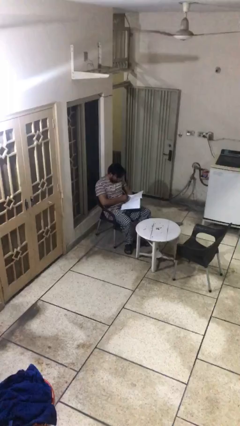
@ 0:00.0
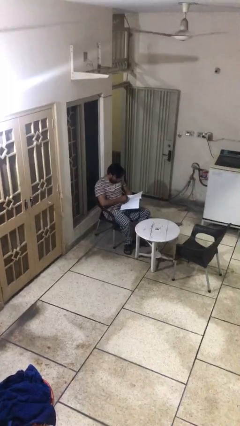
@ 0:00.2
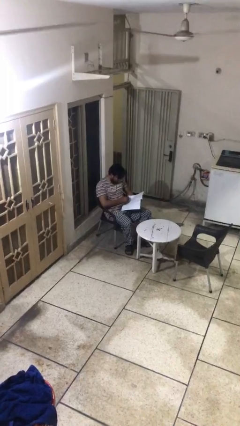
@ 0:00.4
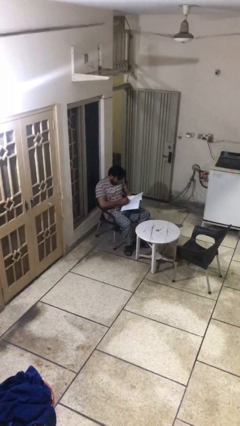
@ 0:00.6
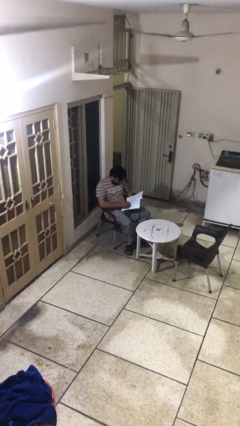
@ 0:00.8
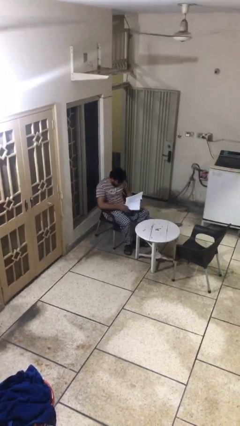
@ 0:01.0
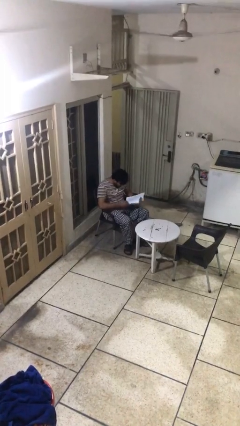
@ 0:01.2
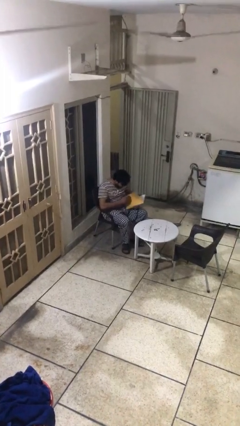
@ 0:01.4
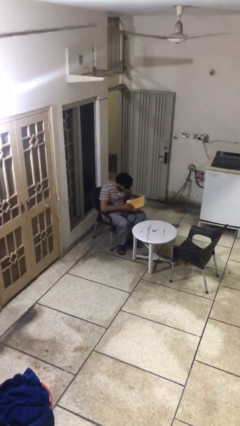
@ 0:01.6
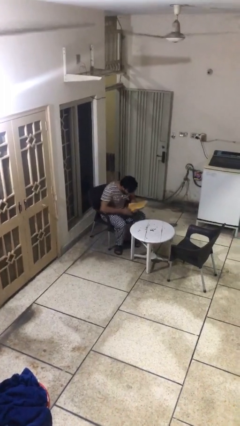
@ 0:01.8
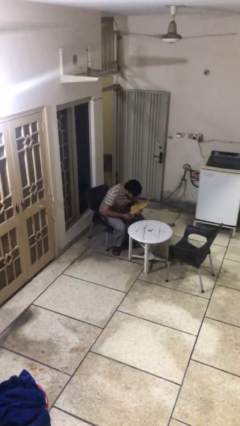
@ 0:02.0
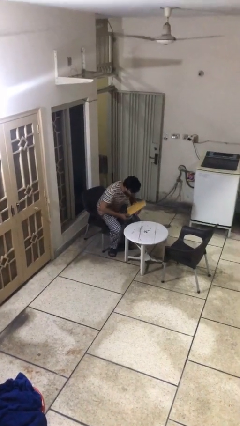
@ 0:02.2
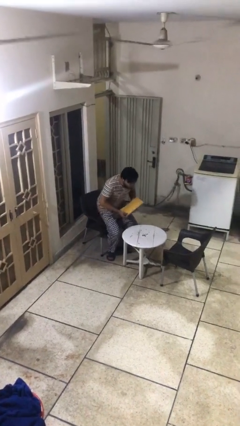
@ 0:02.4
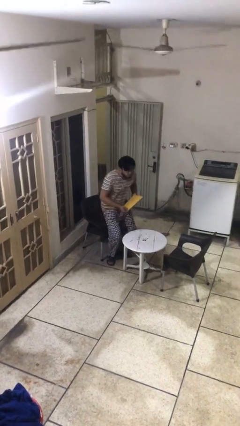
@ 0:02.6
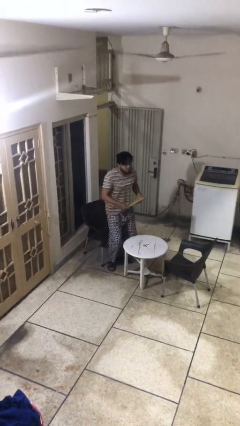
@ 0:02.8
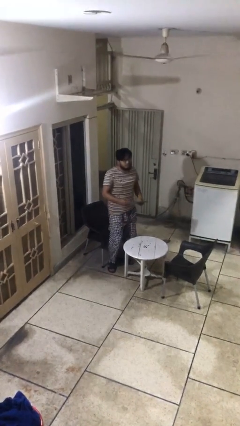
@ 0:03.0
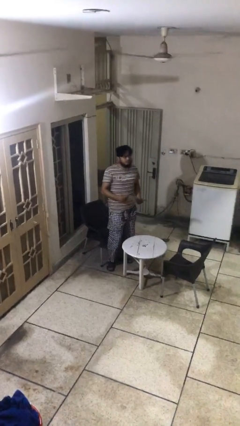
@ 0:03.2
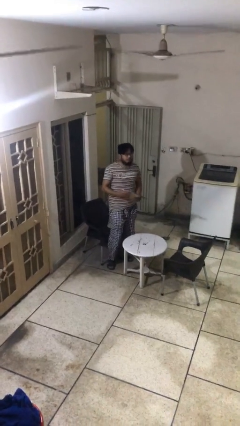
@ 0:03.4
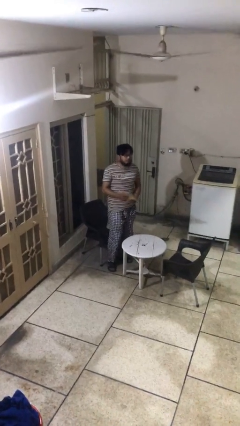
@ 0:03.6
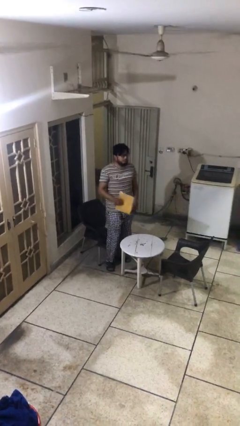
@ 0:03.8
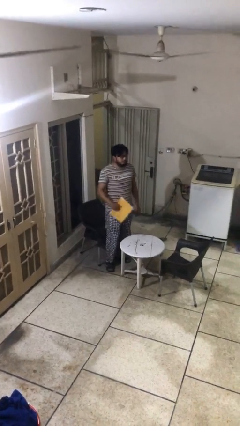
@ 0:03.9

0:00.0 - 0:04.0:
person stands up

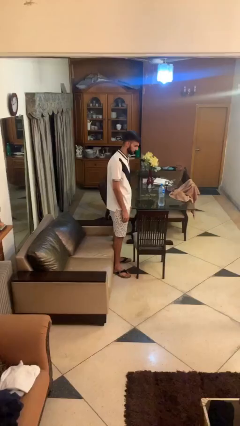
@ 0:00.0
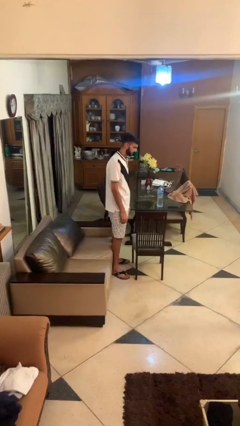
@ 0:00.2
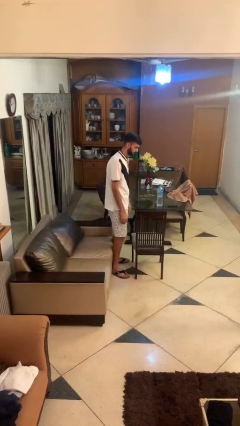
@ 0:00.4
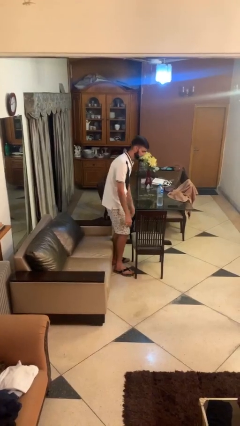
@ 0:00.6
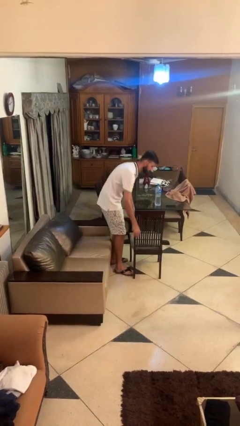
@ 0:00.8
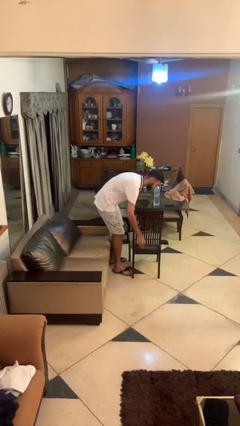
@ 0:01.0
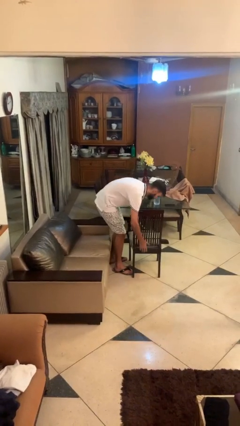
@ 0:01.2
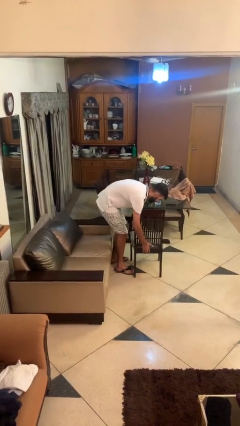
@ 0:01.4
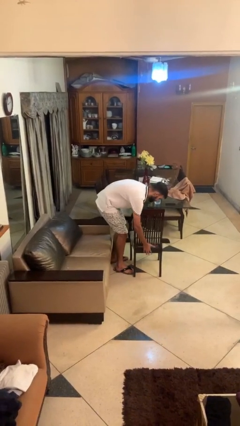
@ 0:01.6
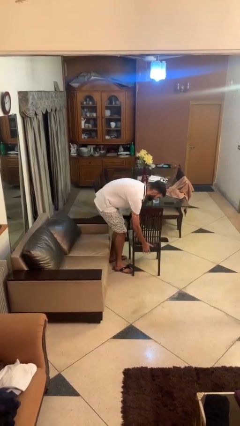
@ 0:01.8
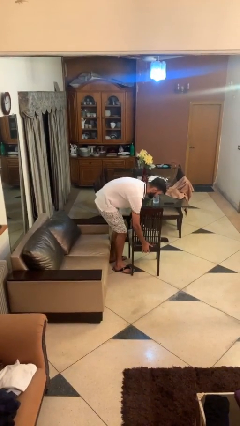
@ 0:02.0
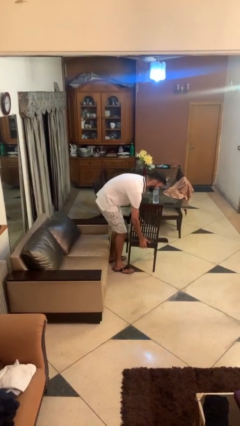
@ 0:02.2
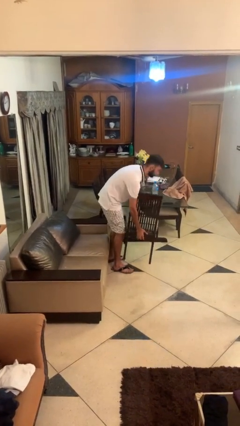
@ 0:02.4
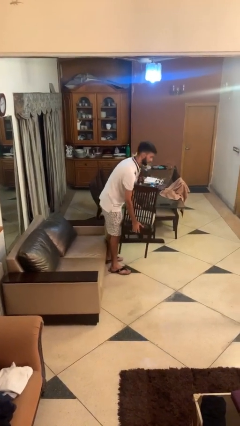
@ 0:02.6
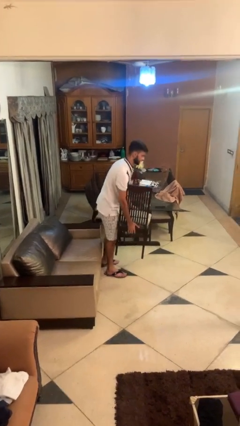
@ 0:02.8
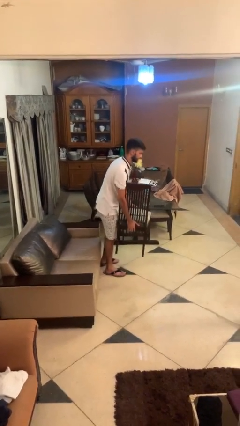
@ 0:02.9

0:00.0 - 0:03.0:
person picks up object from floor

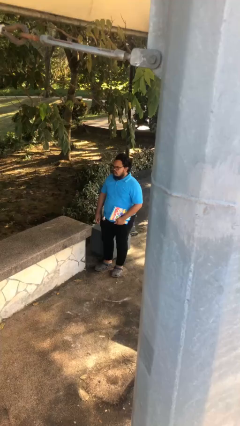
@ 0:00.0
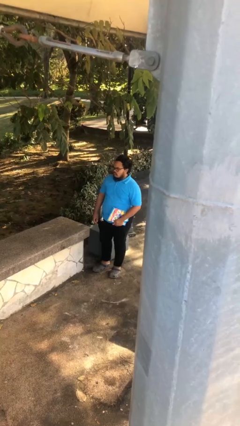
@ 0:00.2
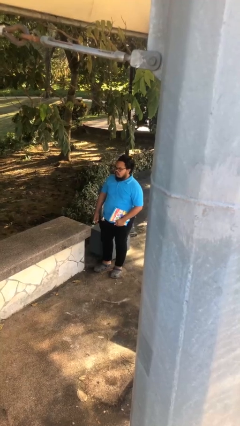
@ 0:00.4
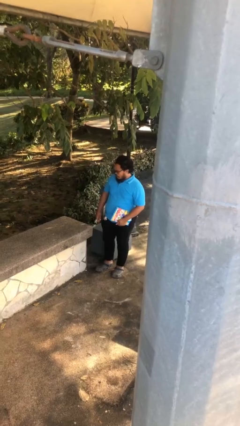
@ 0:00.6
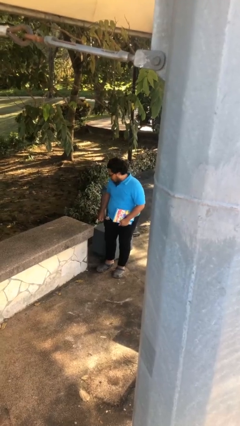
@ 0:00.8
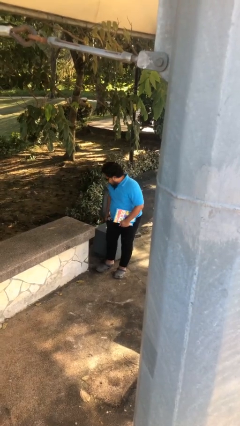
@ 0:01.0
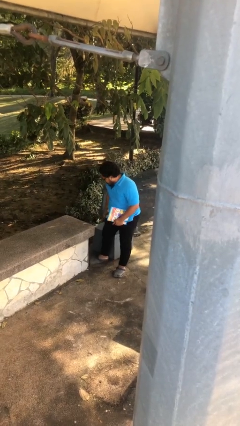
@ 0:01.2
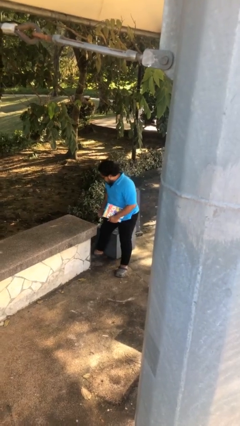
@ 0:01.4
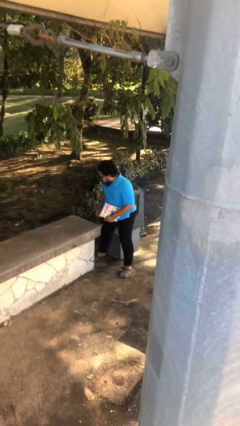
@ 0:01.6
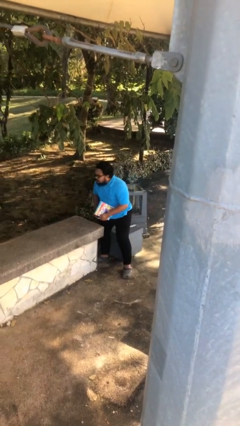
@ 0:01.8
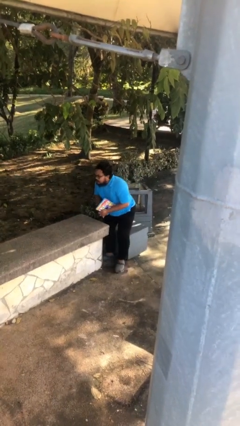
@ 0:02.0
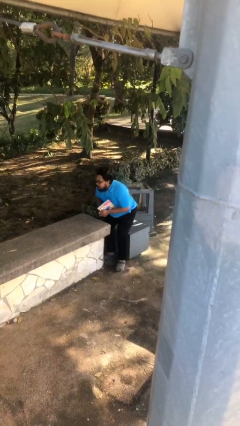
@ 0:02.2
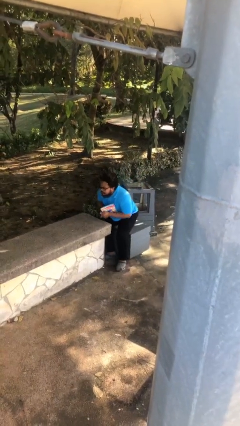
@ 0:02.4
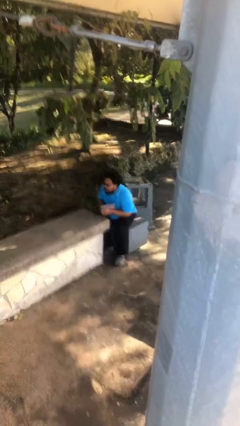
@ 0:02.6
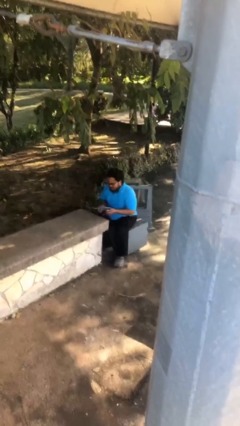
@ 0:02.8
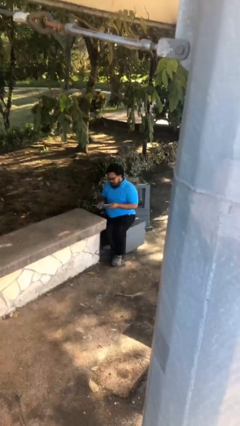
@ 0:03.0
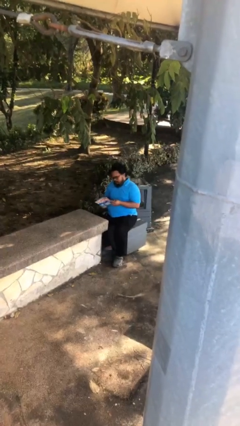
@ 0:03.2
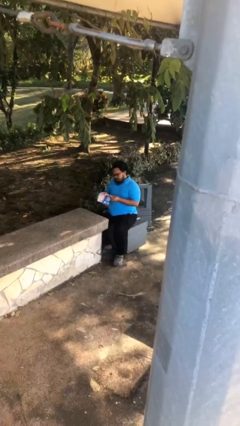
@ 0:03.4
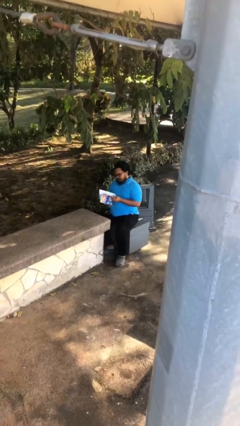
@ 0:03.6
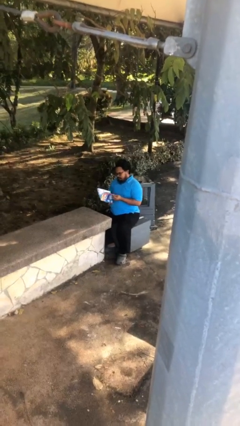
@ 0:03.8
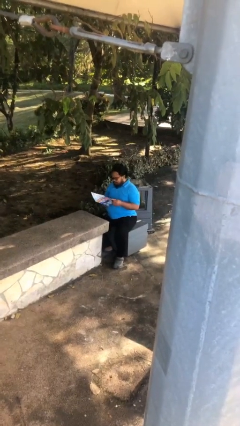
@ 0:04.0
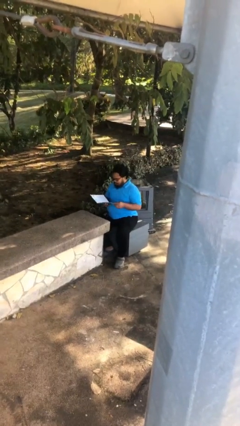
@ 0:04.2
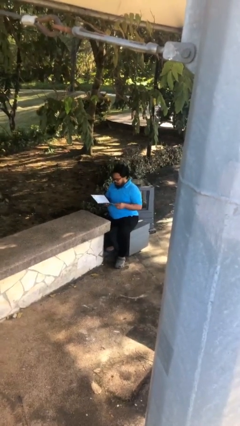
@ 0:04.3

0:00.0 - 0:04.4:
person sits down

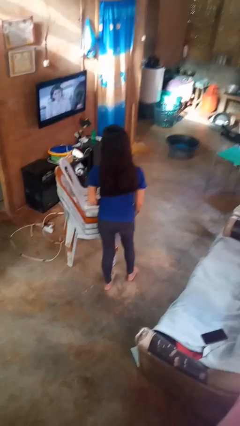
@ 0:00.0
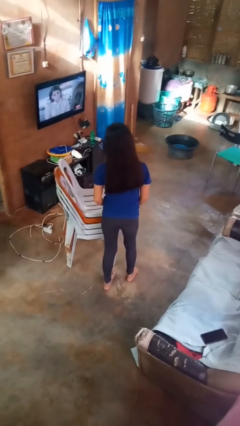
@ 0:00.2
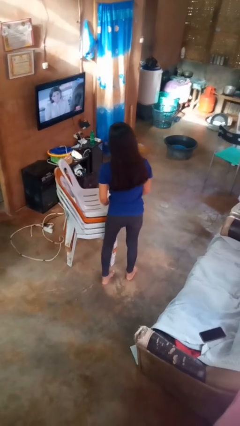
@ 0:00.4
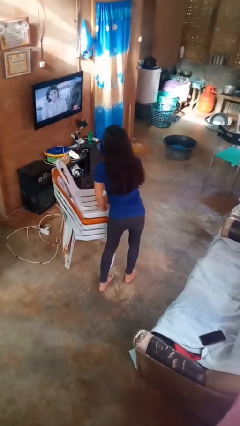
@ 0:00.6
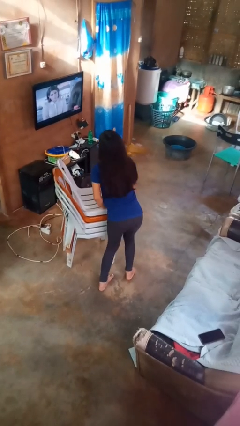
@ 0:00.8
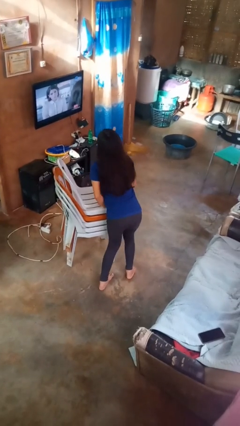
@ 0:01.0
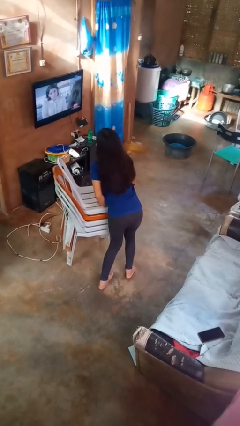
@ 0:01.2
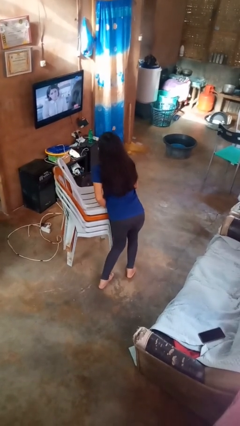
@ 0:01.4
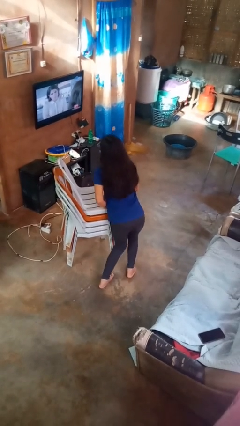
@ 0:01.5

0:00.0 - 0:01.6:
person trips on object on floor

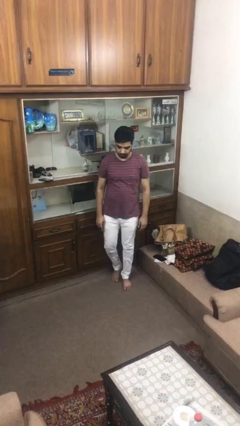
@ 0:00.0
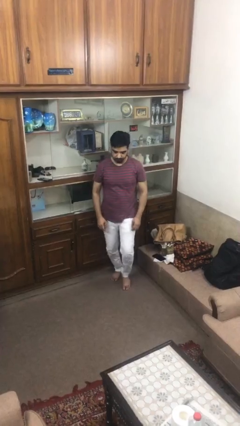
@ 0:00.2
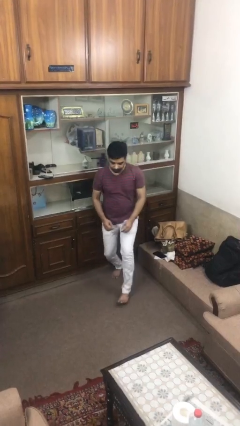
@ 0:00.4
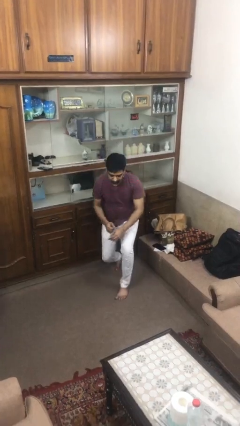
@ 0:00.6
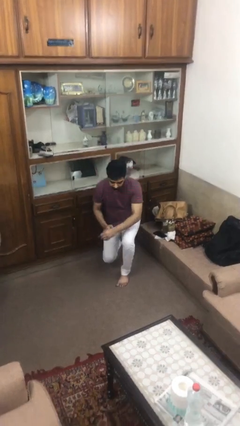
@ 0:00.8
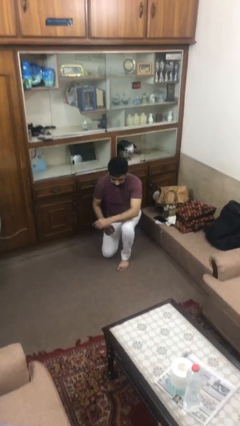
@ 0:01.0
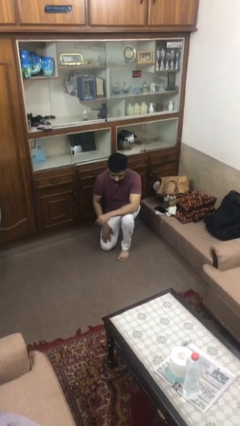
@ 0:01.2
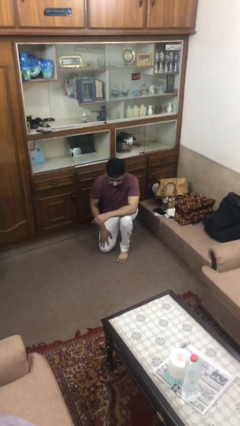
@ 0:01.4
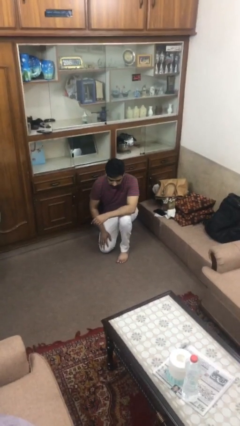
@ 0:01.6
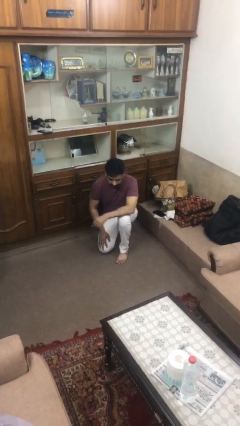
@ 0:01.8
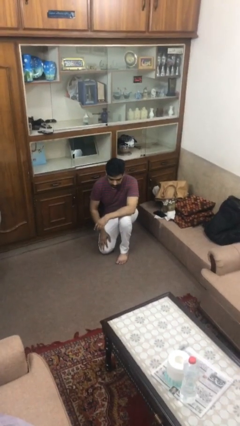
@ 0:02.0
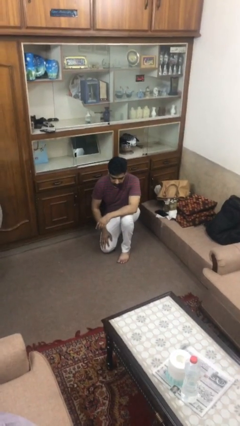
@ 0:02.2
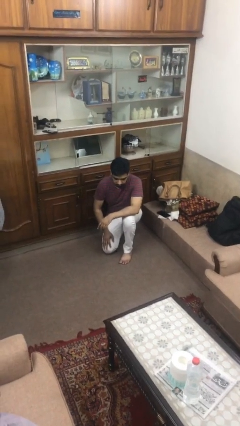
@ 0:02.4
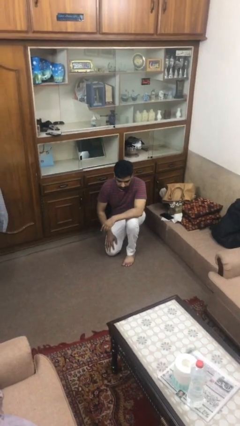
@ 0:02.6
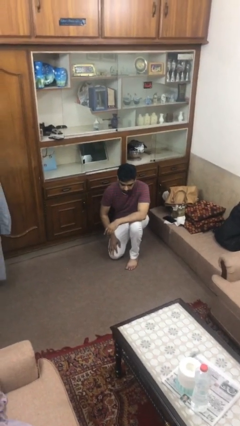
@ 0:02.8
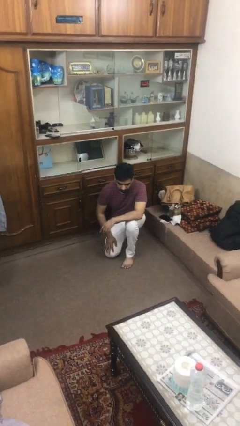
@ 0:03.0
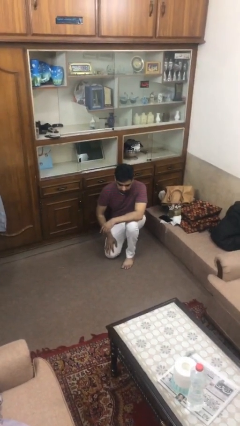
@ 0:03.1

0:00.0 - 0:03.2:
person kneels

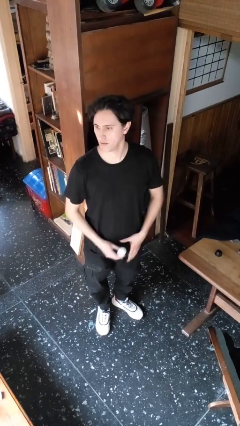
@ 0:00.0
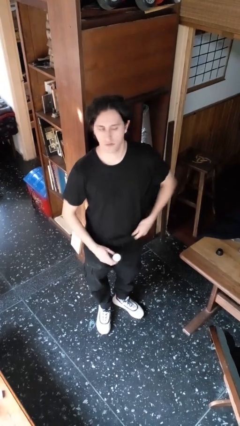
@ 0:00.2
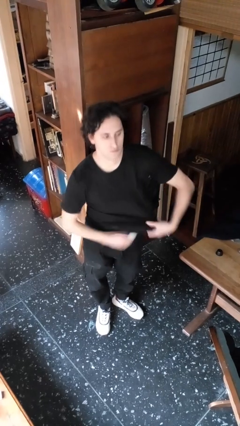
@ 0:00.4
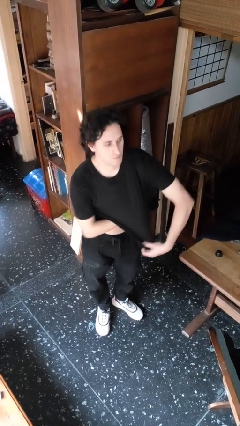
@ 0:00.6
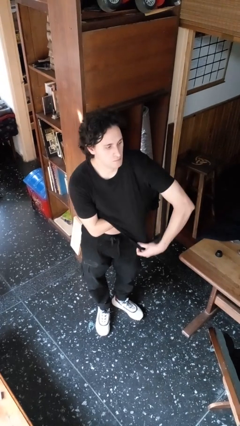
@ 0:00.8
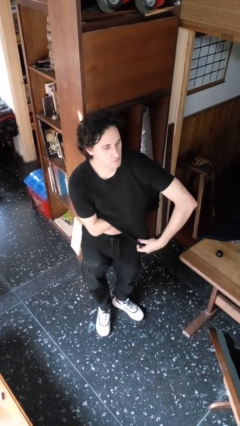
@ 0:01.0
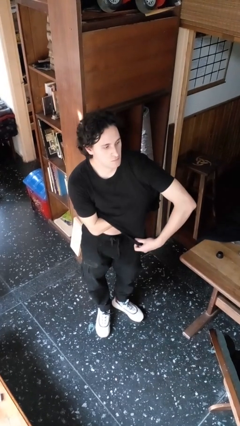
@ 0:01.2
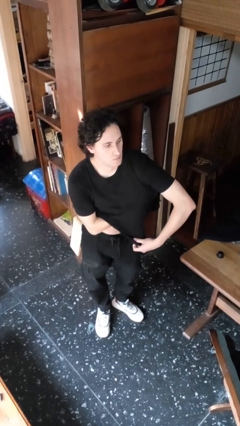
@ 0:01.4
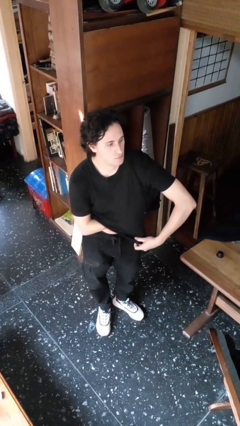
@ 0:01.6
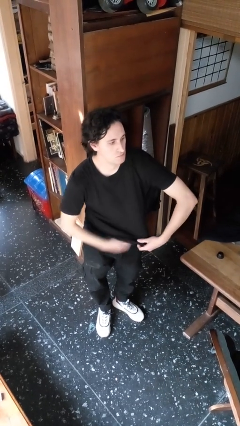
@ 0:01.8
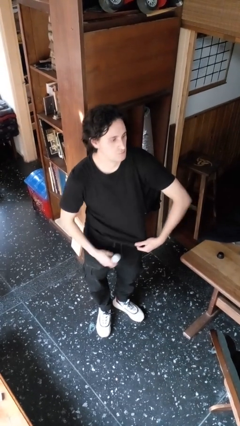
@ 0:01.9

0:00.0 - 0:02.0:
person applies deodorant
